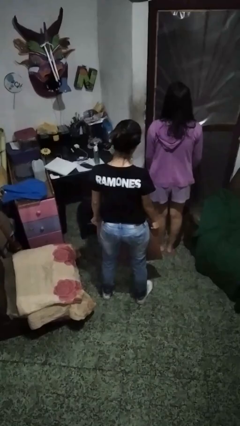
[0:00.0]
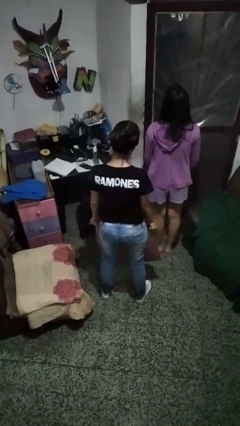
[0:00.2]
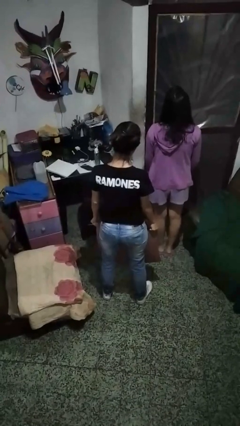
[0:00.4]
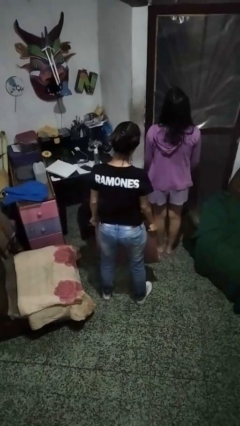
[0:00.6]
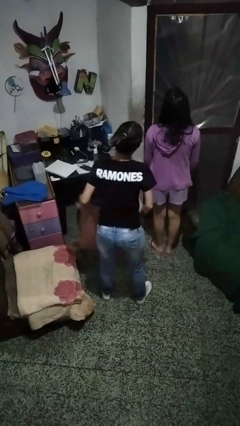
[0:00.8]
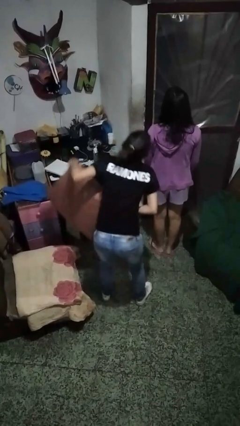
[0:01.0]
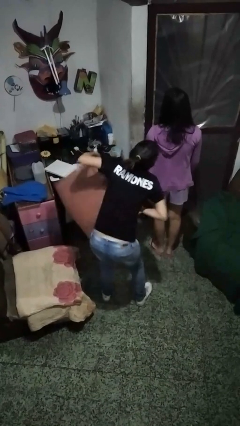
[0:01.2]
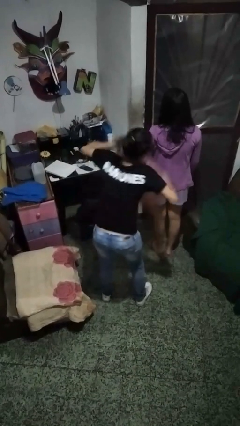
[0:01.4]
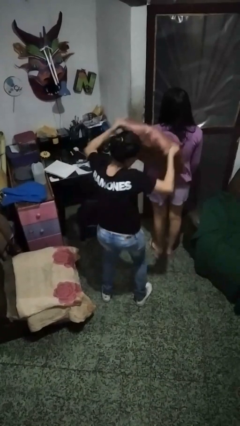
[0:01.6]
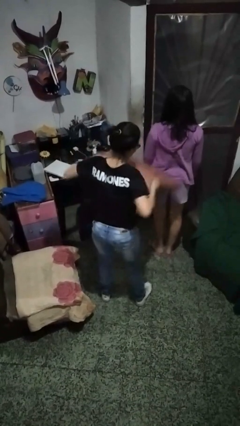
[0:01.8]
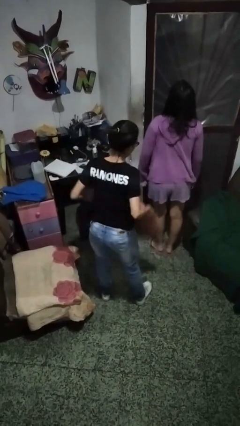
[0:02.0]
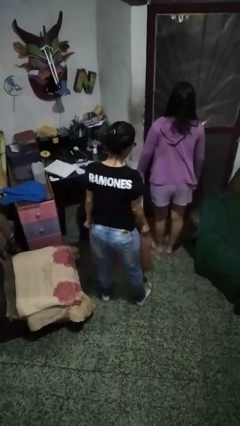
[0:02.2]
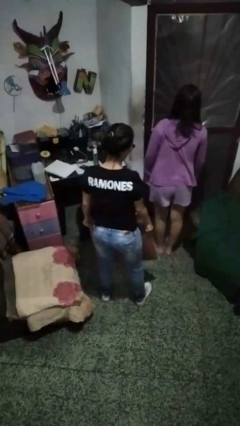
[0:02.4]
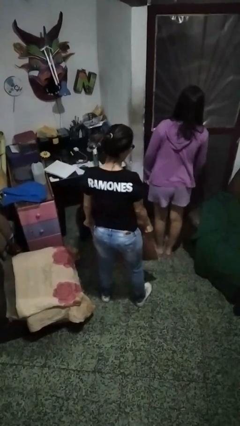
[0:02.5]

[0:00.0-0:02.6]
person hits person with pillow

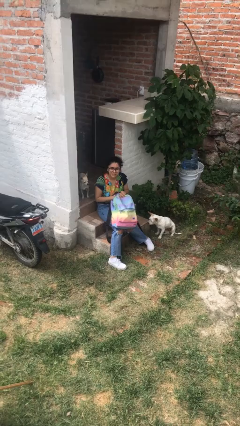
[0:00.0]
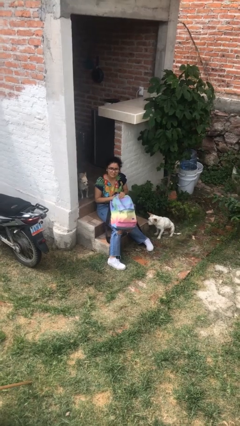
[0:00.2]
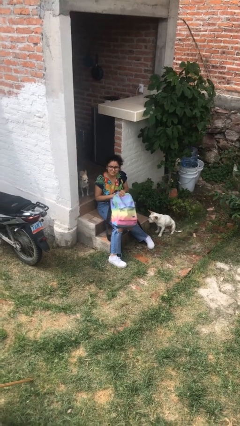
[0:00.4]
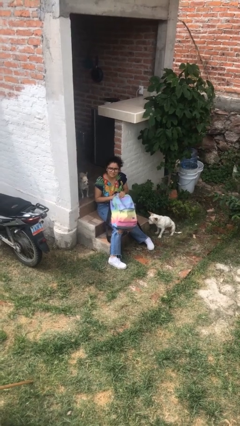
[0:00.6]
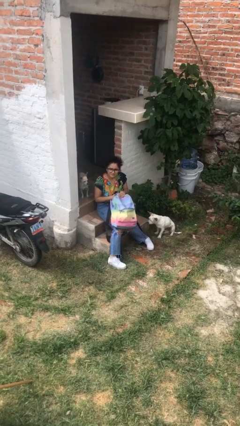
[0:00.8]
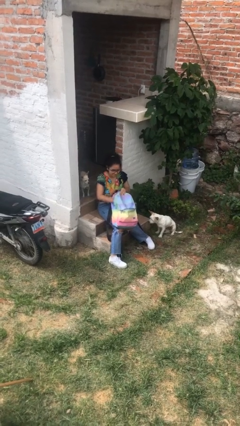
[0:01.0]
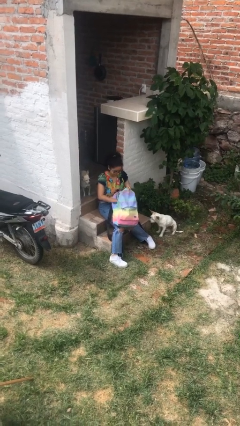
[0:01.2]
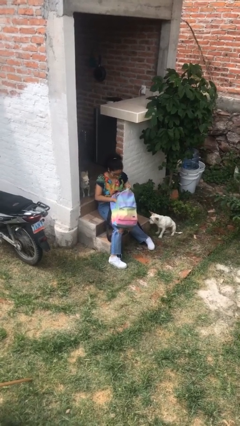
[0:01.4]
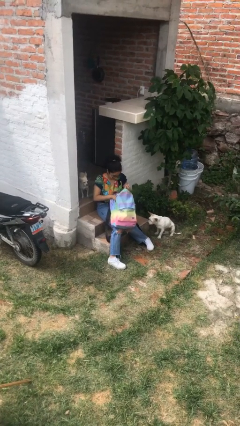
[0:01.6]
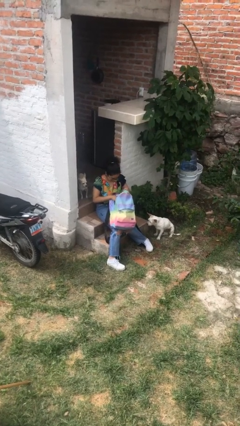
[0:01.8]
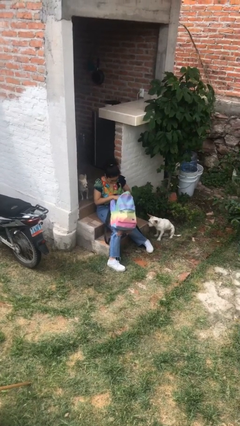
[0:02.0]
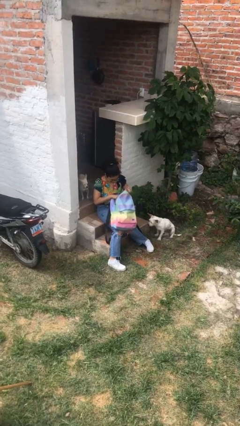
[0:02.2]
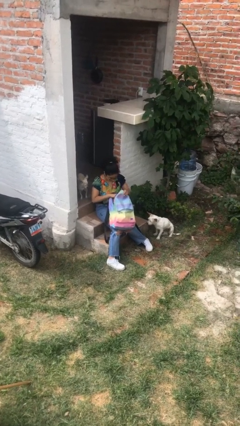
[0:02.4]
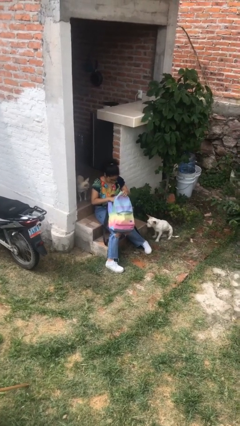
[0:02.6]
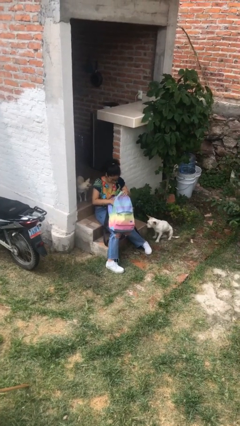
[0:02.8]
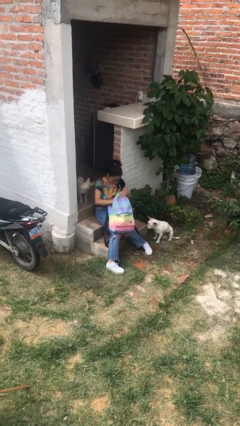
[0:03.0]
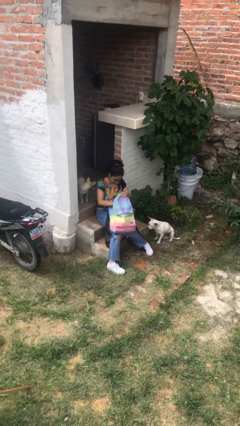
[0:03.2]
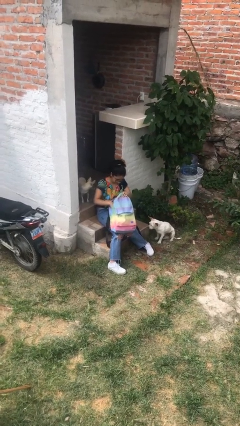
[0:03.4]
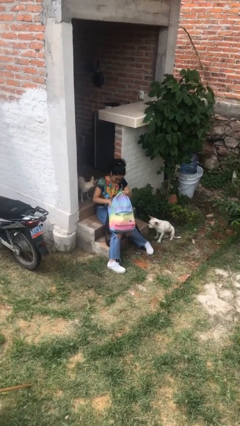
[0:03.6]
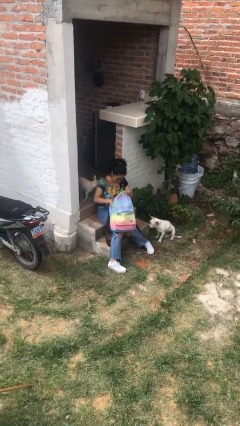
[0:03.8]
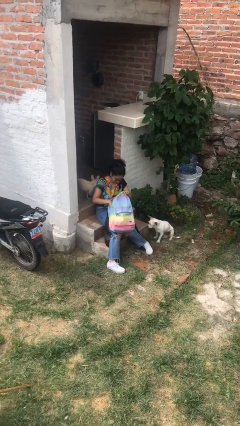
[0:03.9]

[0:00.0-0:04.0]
person searches in backpack

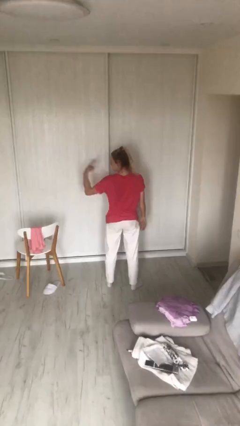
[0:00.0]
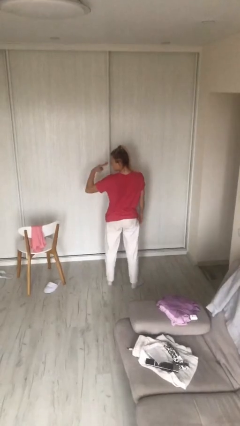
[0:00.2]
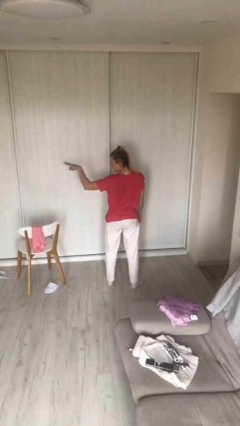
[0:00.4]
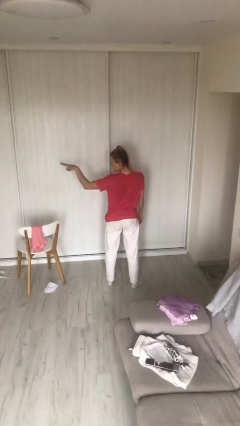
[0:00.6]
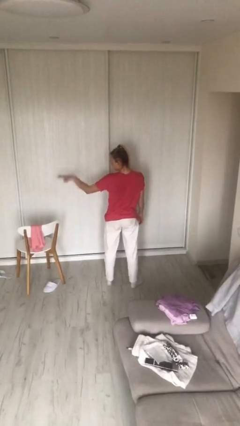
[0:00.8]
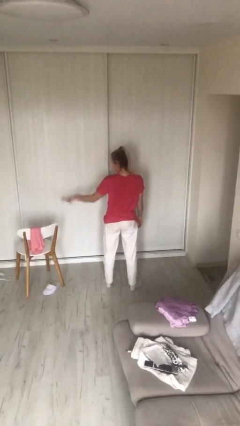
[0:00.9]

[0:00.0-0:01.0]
person gestures watch closely

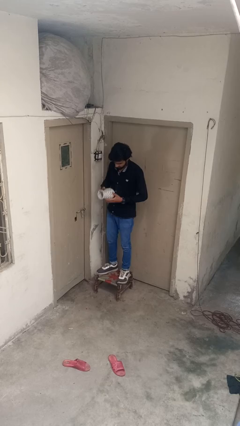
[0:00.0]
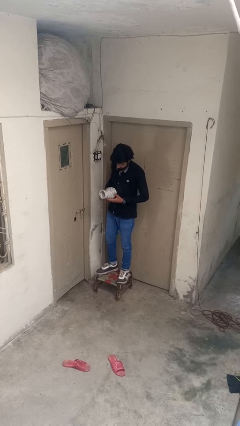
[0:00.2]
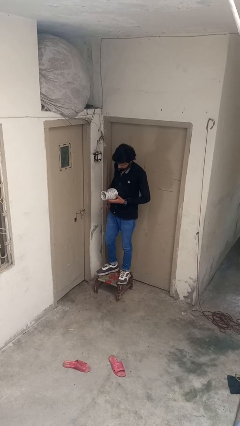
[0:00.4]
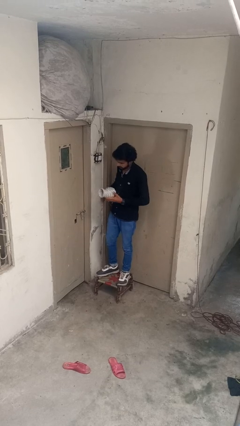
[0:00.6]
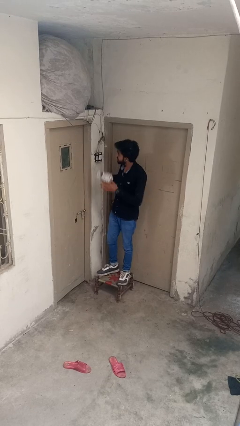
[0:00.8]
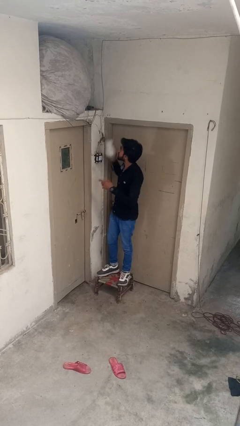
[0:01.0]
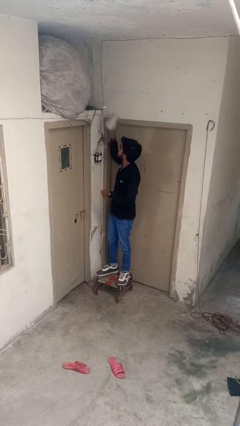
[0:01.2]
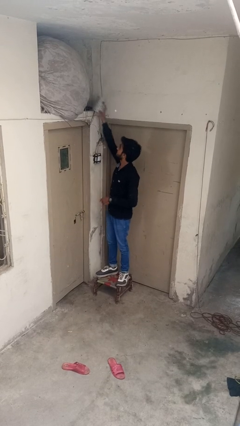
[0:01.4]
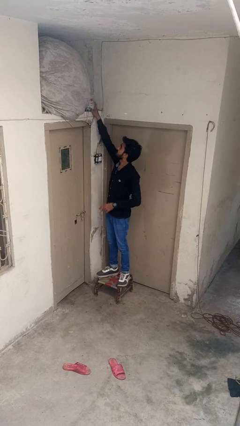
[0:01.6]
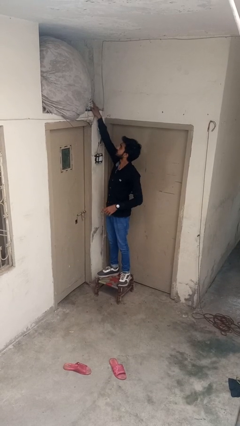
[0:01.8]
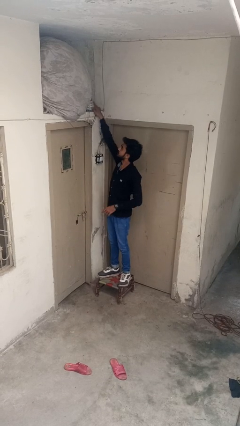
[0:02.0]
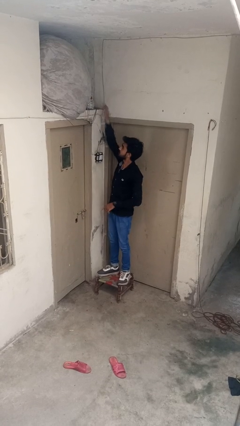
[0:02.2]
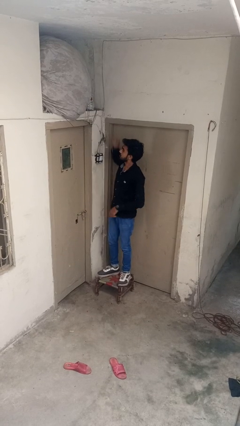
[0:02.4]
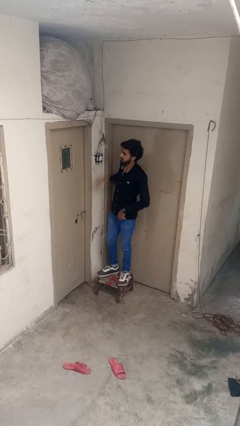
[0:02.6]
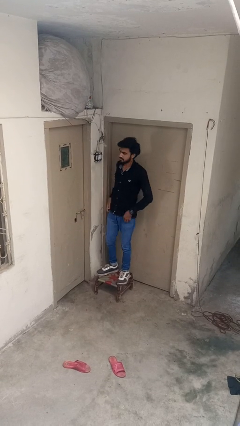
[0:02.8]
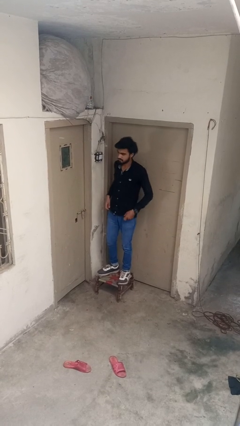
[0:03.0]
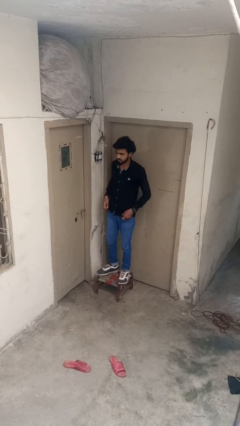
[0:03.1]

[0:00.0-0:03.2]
person puts down object on shelf

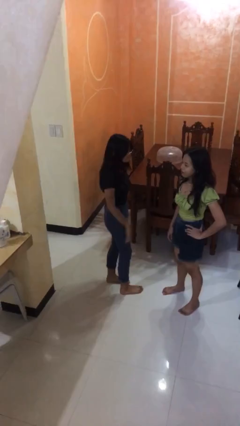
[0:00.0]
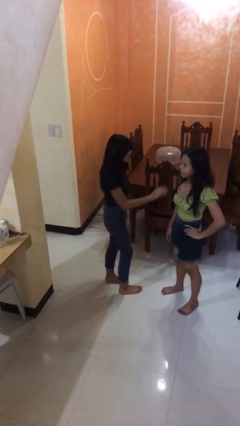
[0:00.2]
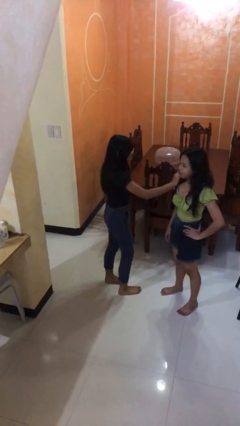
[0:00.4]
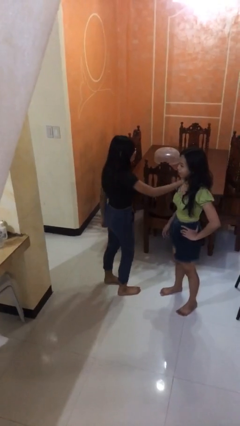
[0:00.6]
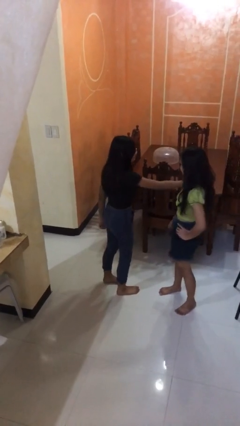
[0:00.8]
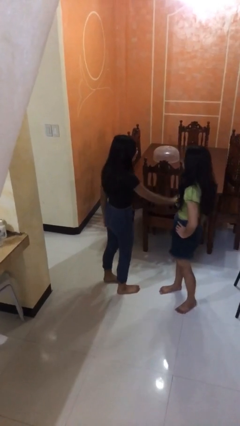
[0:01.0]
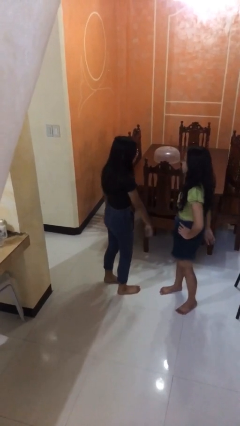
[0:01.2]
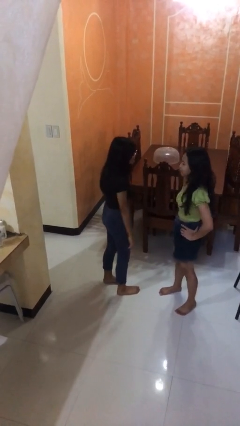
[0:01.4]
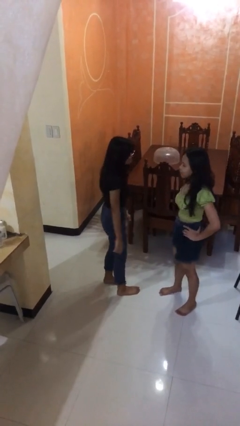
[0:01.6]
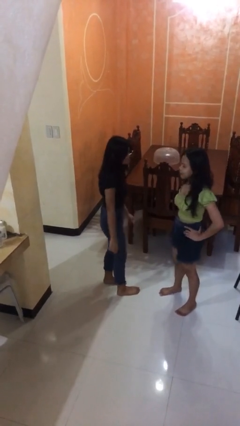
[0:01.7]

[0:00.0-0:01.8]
person shoves person

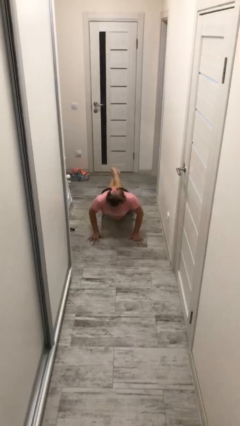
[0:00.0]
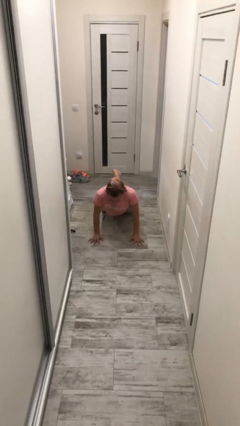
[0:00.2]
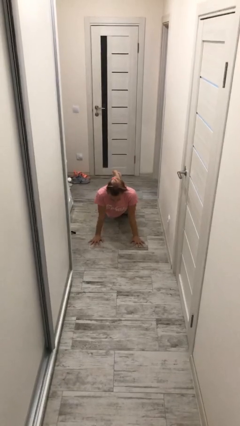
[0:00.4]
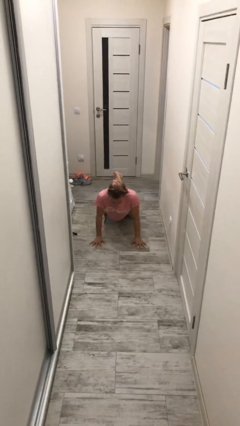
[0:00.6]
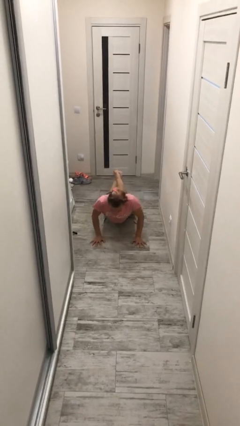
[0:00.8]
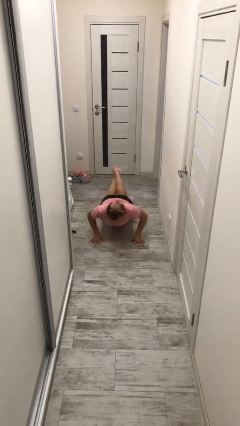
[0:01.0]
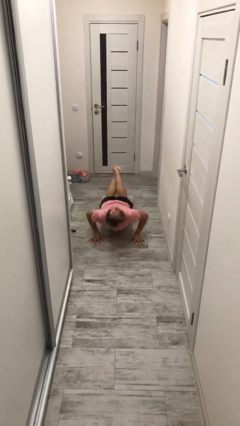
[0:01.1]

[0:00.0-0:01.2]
person exercises with pushup

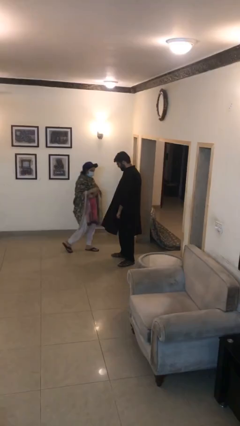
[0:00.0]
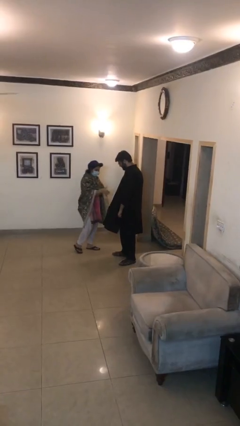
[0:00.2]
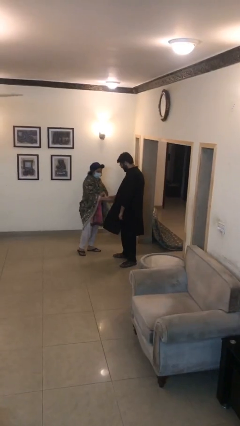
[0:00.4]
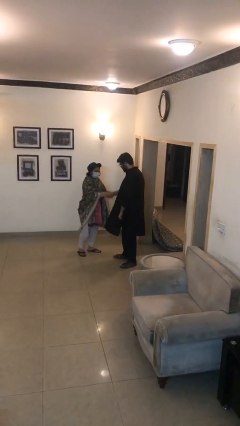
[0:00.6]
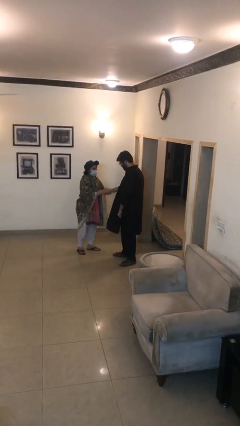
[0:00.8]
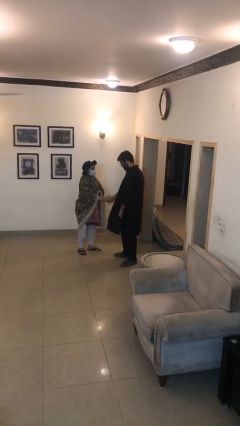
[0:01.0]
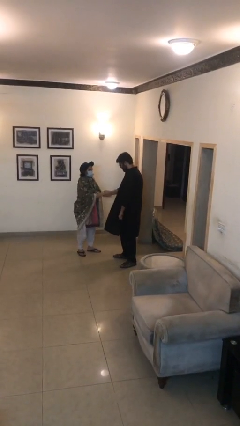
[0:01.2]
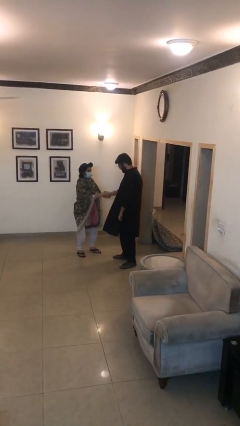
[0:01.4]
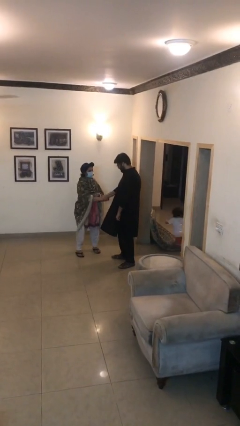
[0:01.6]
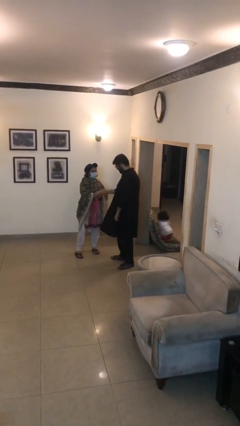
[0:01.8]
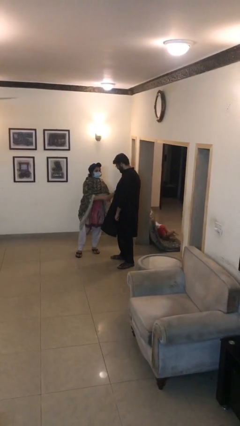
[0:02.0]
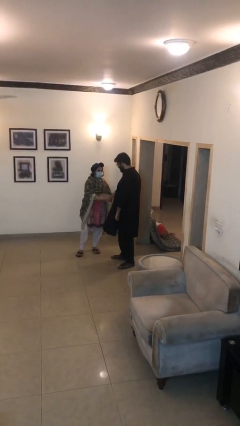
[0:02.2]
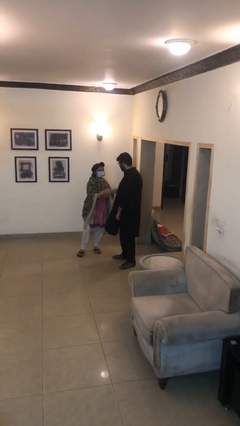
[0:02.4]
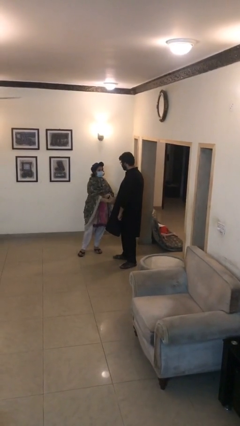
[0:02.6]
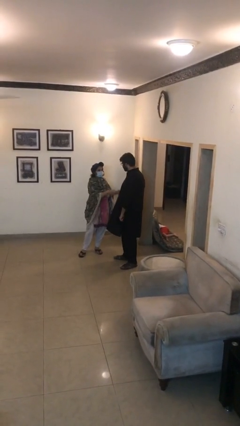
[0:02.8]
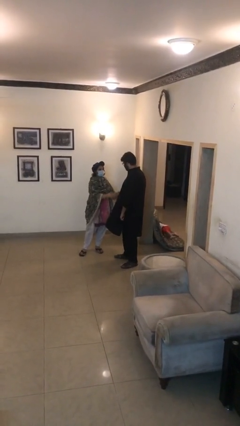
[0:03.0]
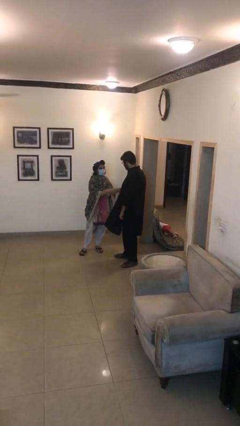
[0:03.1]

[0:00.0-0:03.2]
person shakes hand

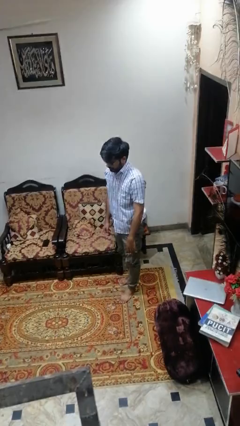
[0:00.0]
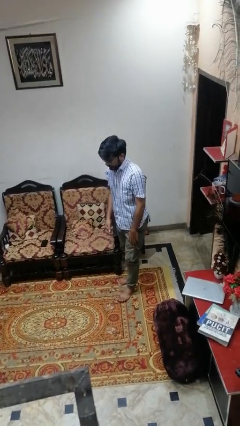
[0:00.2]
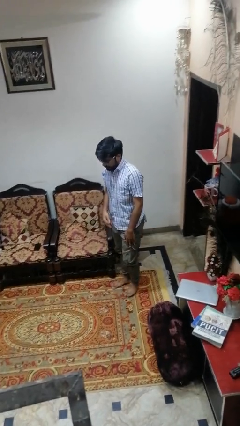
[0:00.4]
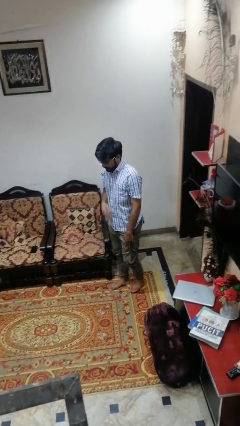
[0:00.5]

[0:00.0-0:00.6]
person stands up from floor
